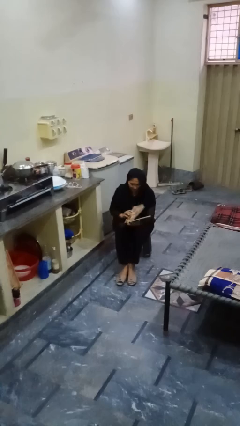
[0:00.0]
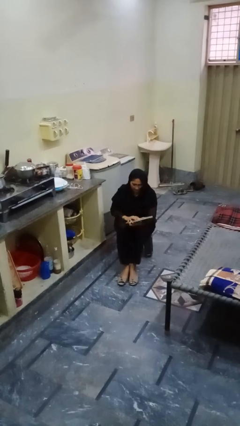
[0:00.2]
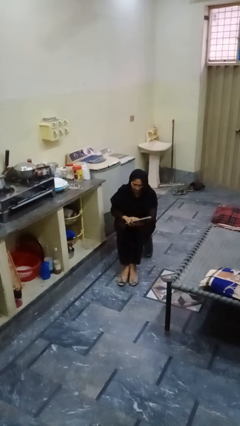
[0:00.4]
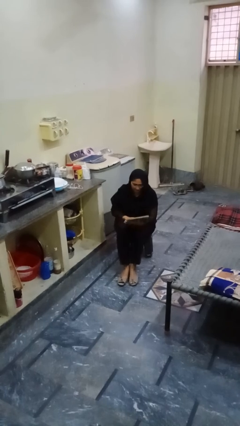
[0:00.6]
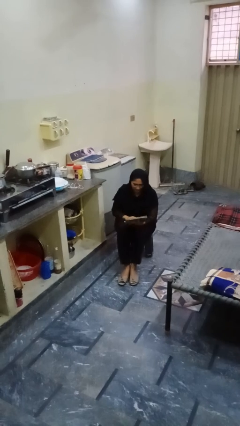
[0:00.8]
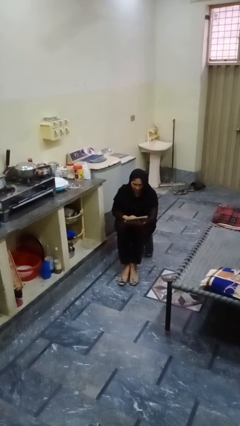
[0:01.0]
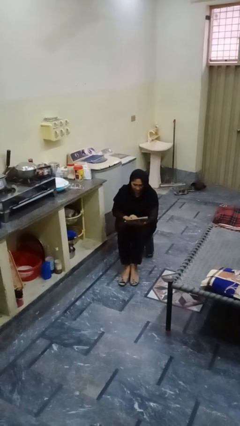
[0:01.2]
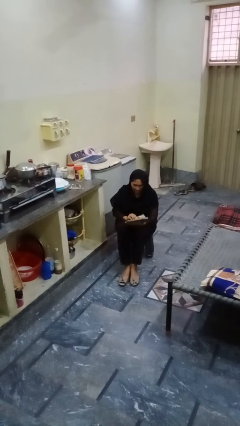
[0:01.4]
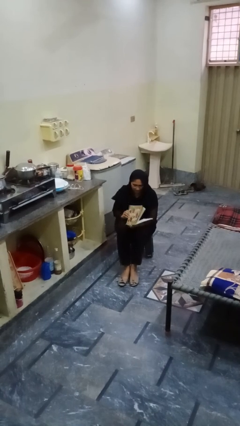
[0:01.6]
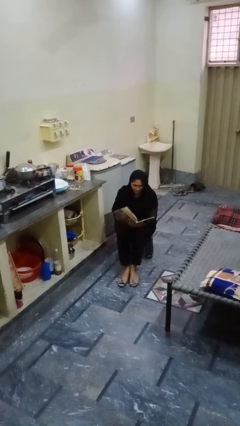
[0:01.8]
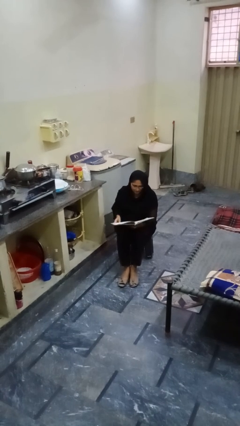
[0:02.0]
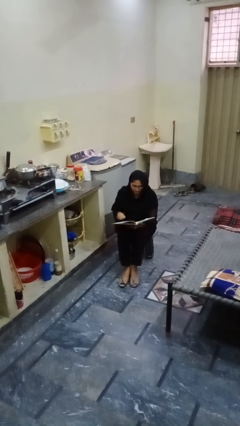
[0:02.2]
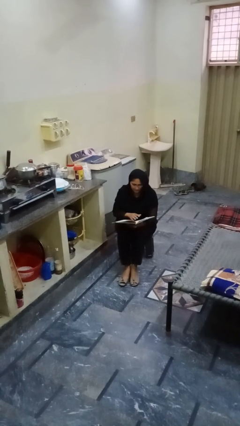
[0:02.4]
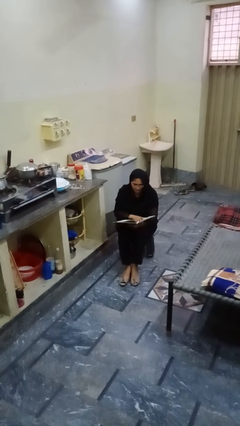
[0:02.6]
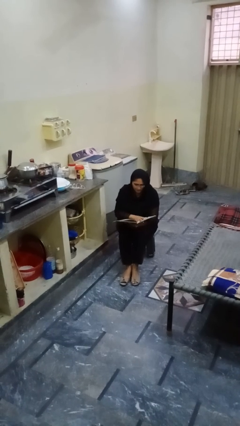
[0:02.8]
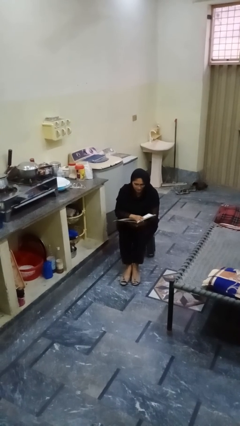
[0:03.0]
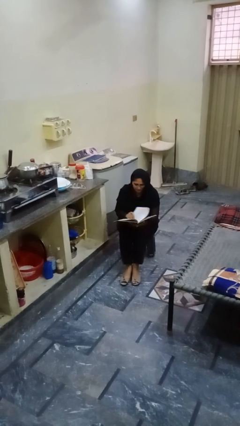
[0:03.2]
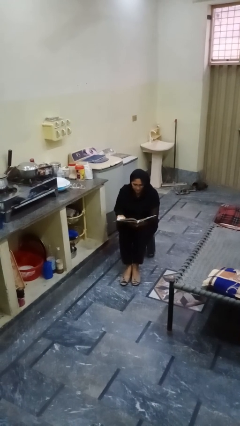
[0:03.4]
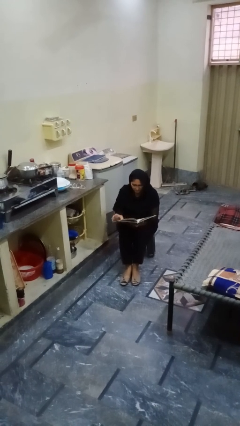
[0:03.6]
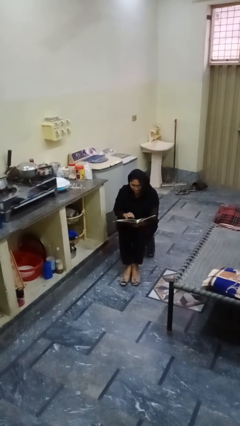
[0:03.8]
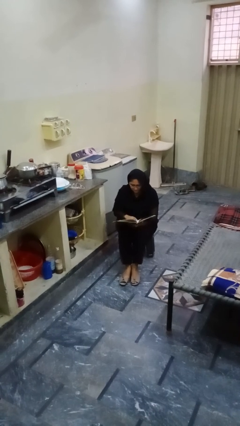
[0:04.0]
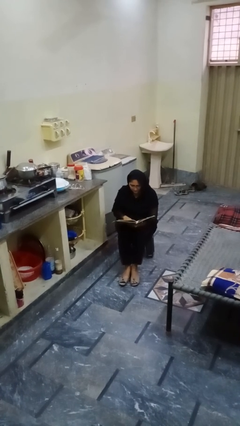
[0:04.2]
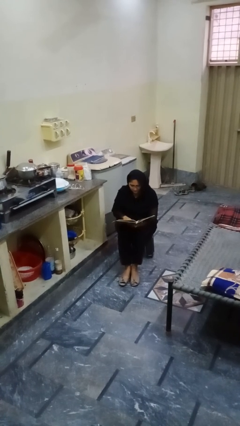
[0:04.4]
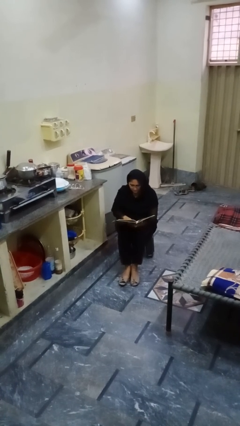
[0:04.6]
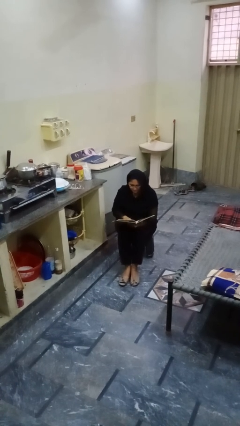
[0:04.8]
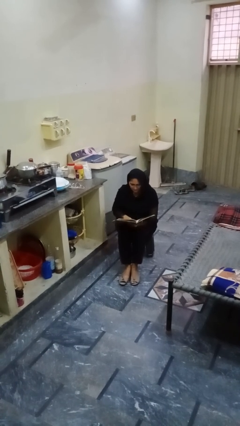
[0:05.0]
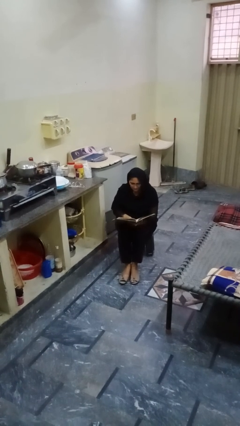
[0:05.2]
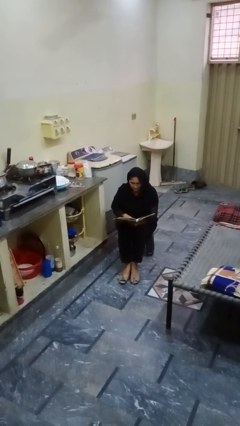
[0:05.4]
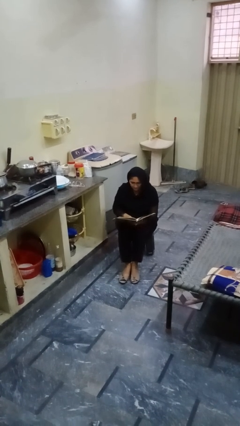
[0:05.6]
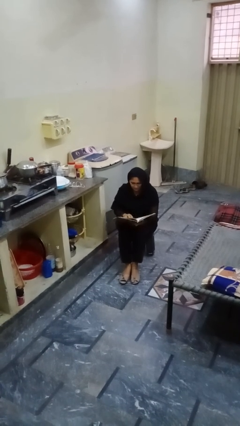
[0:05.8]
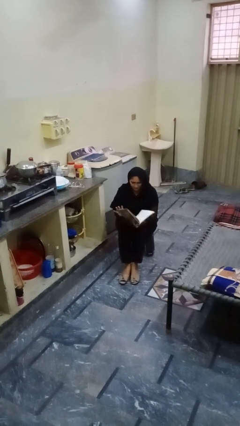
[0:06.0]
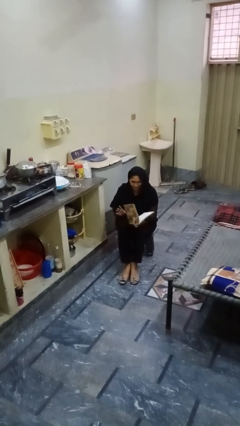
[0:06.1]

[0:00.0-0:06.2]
person reads book

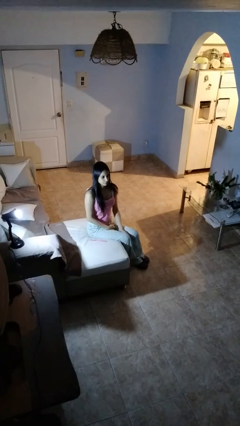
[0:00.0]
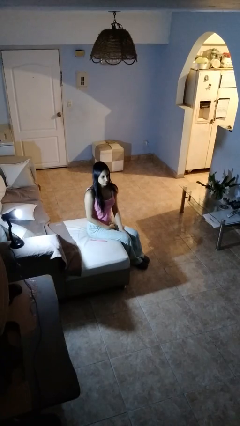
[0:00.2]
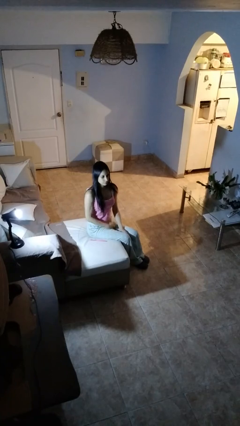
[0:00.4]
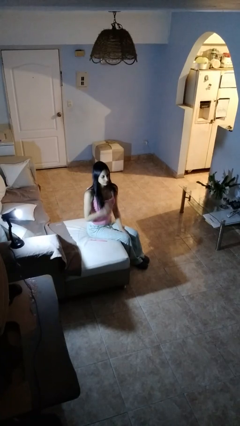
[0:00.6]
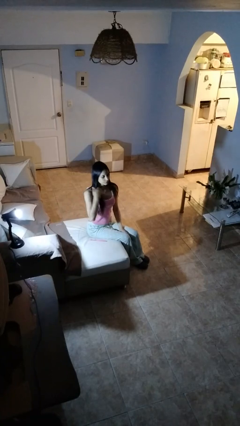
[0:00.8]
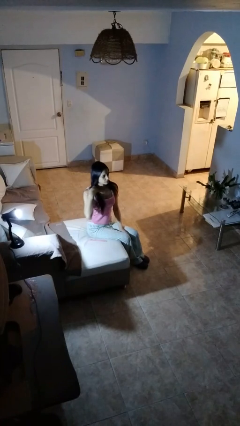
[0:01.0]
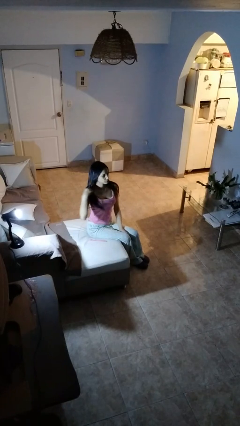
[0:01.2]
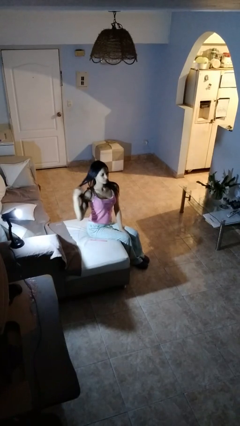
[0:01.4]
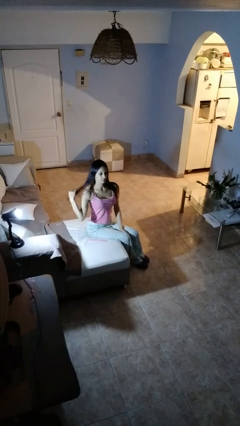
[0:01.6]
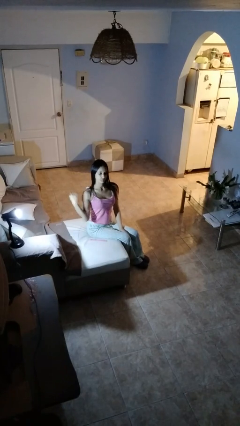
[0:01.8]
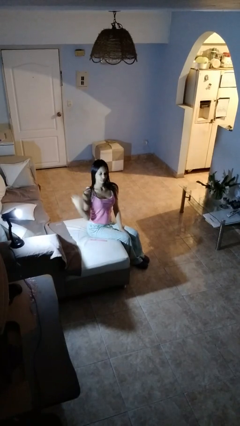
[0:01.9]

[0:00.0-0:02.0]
person strokes hair

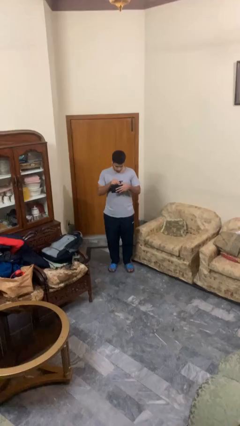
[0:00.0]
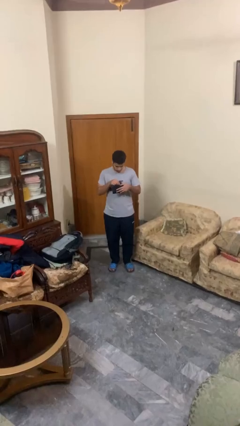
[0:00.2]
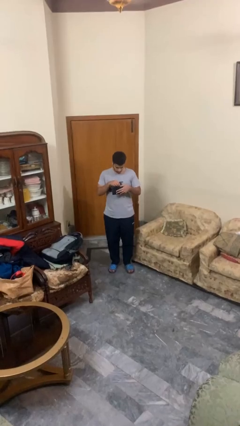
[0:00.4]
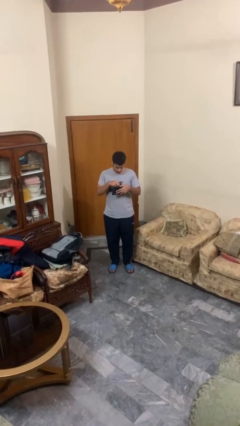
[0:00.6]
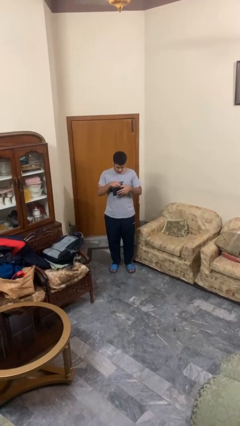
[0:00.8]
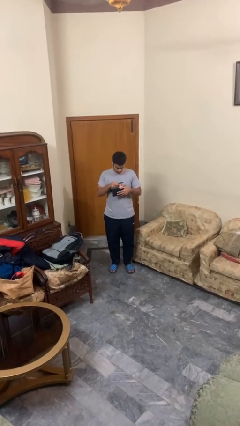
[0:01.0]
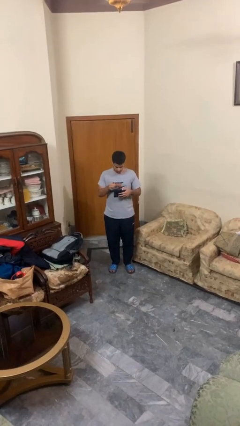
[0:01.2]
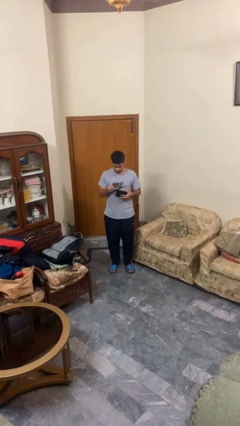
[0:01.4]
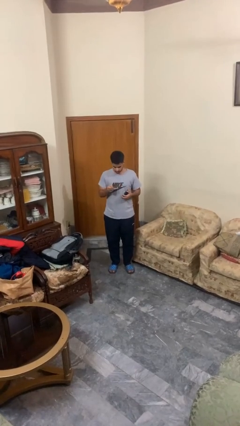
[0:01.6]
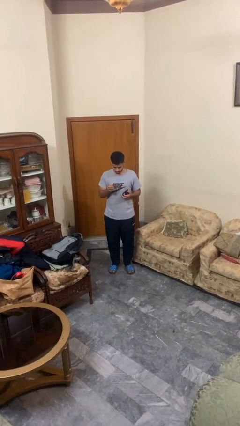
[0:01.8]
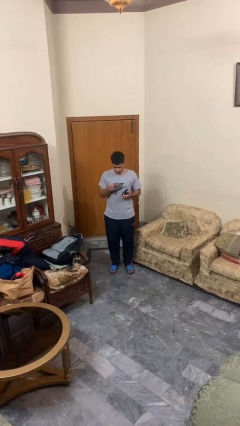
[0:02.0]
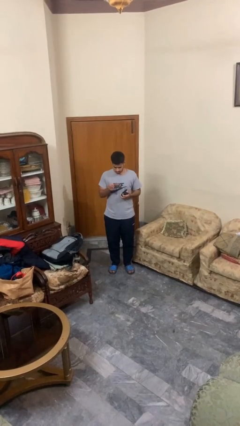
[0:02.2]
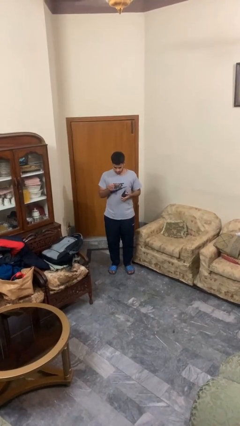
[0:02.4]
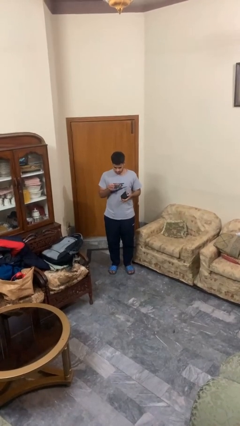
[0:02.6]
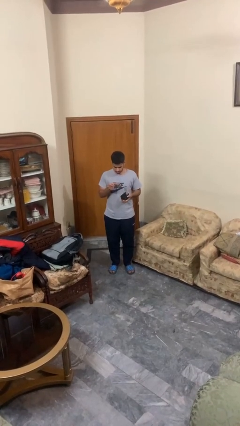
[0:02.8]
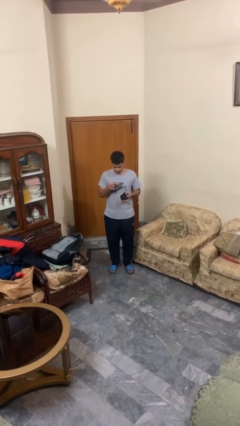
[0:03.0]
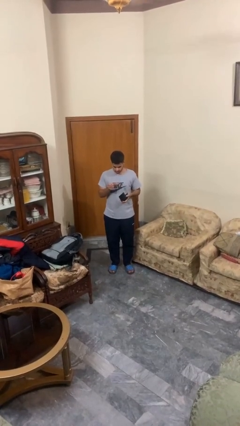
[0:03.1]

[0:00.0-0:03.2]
person takes object from purse

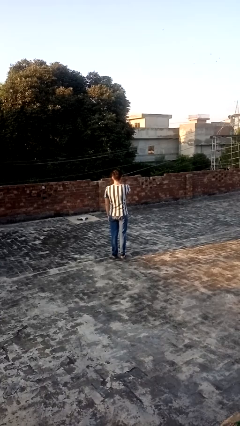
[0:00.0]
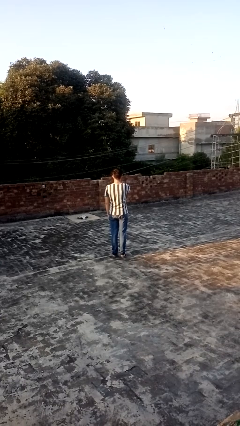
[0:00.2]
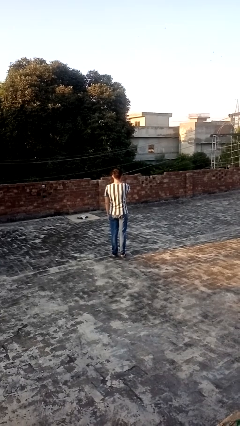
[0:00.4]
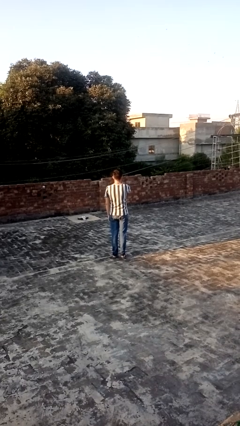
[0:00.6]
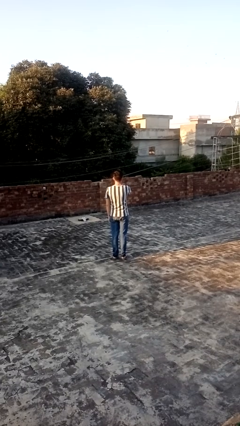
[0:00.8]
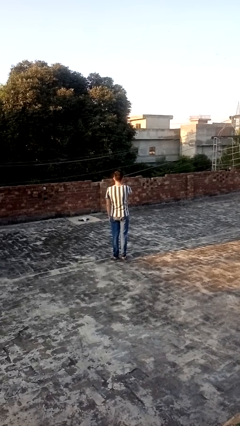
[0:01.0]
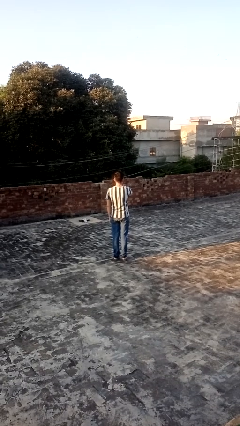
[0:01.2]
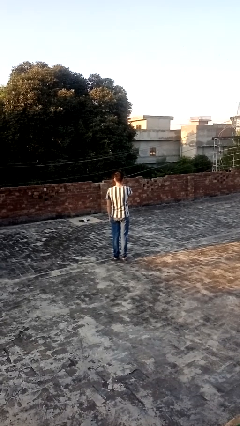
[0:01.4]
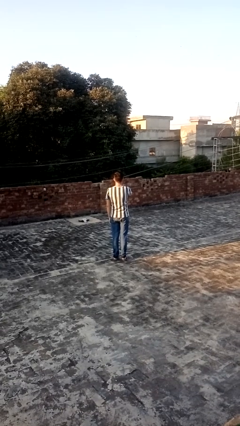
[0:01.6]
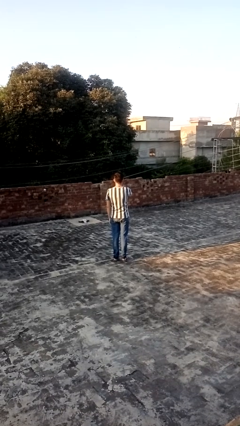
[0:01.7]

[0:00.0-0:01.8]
person gestures swipe down

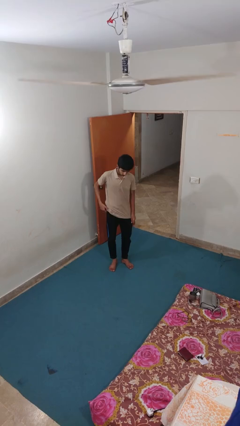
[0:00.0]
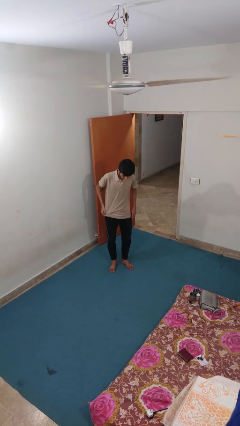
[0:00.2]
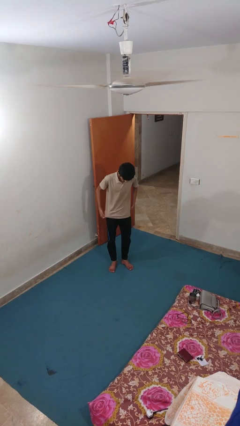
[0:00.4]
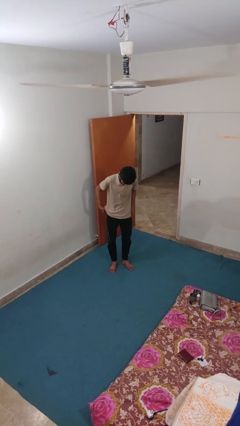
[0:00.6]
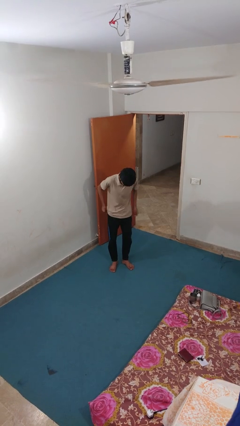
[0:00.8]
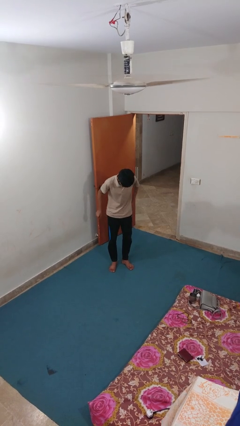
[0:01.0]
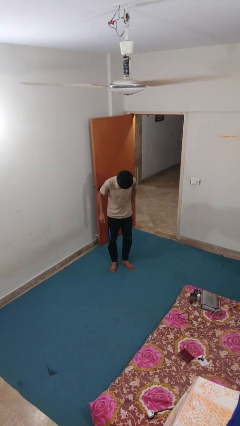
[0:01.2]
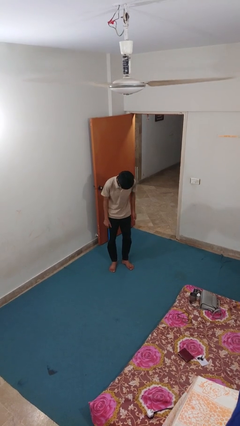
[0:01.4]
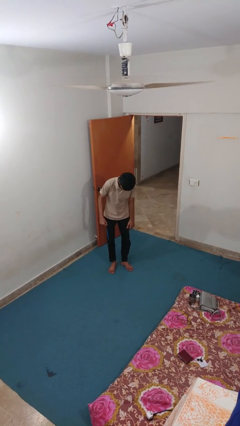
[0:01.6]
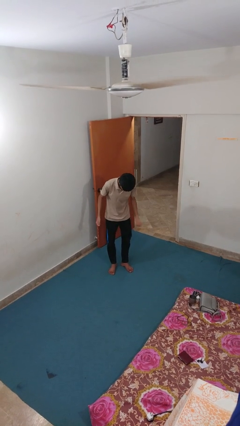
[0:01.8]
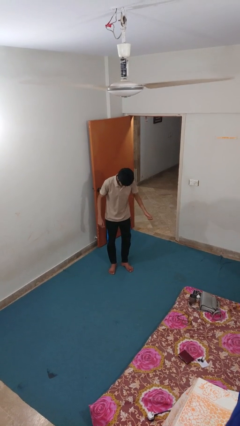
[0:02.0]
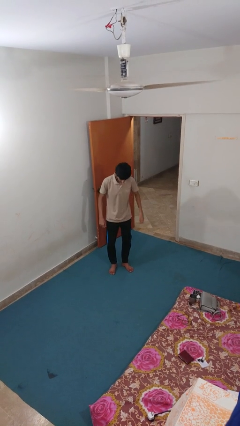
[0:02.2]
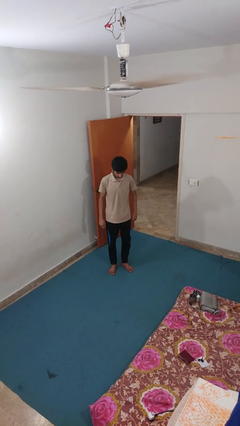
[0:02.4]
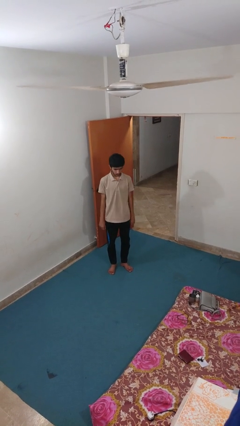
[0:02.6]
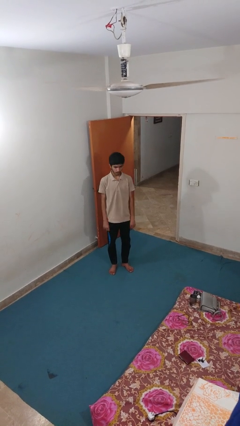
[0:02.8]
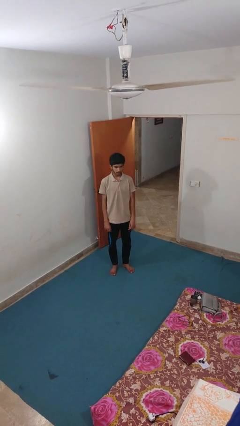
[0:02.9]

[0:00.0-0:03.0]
person hikes up pants

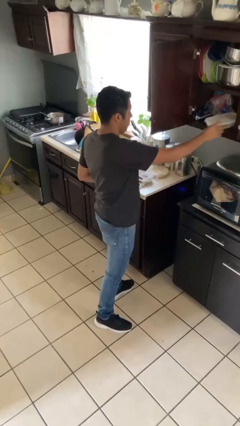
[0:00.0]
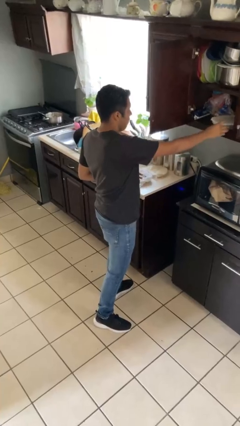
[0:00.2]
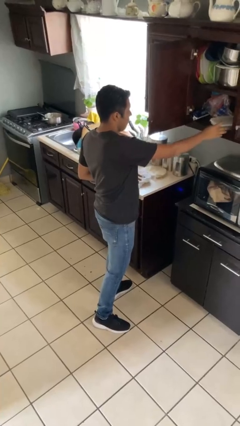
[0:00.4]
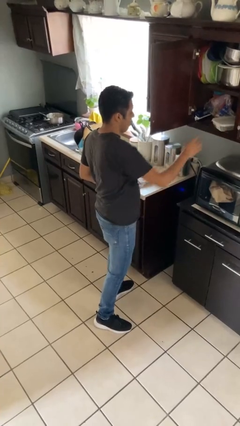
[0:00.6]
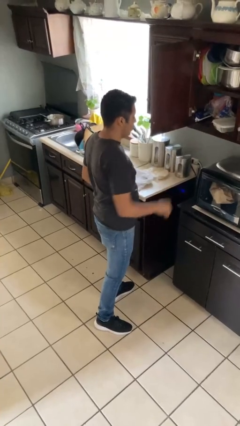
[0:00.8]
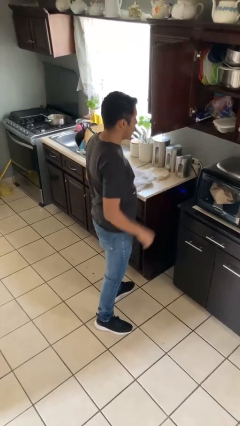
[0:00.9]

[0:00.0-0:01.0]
person puts down object into cabinet

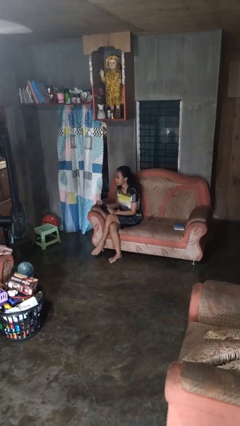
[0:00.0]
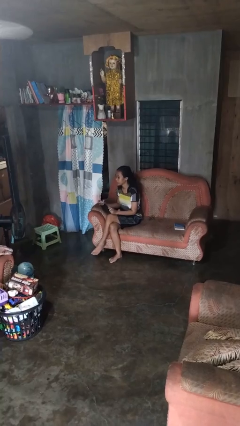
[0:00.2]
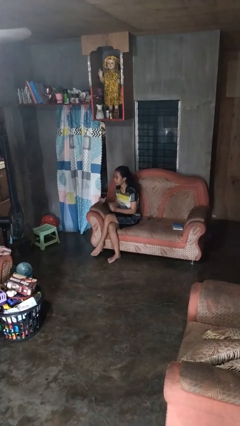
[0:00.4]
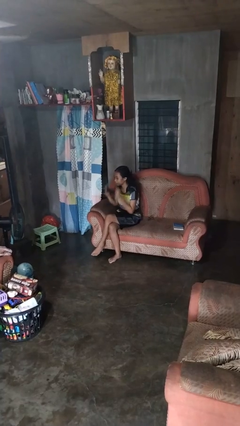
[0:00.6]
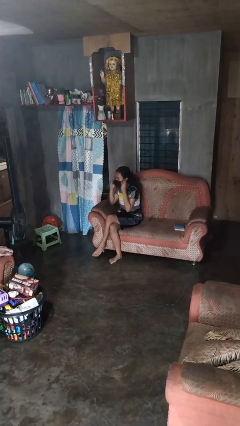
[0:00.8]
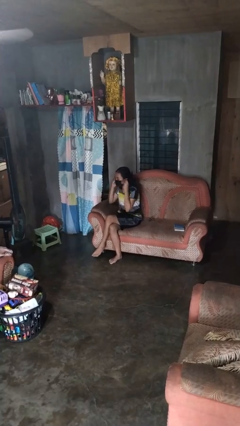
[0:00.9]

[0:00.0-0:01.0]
person puts on facemask
